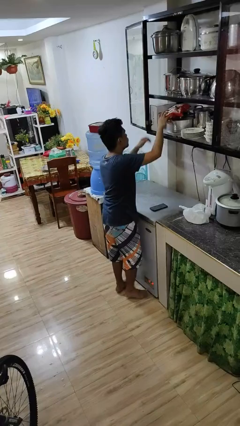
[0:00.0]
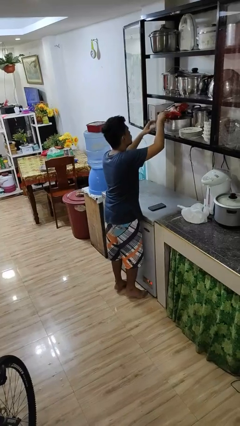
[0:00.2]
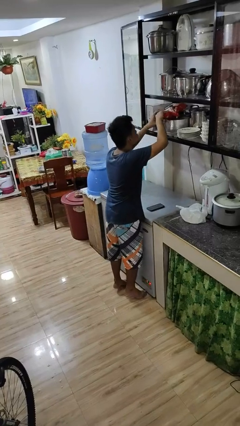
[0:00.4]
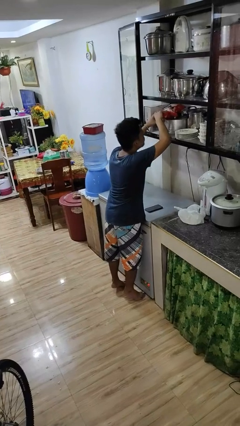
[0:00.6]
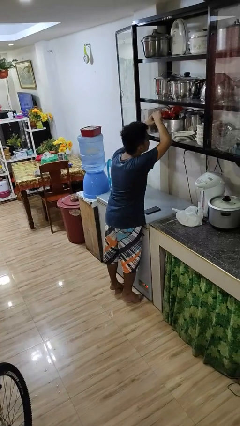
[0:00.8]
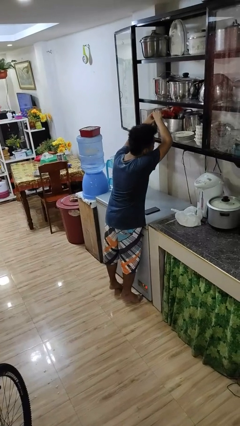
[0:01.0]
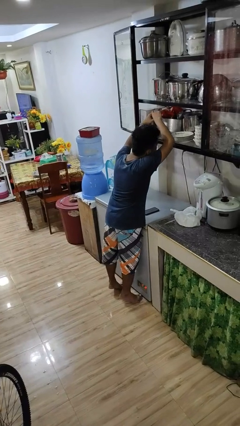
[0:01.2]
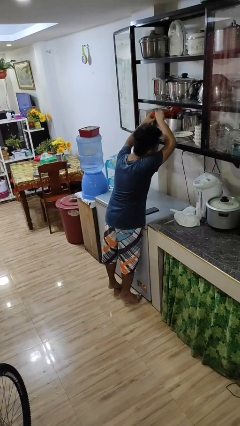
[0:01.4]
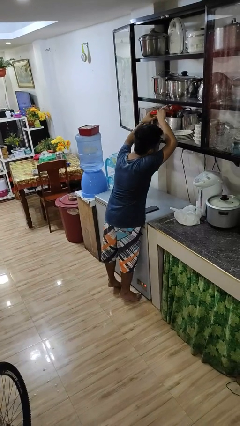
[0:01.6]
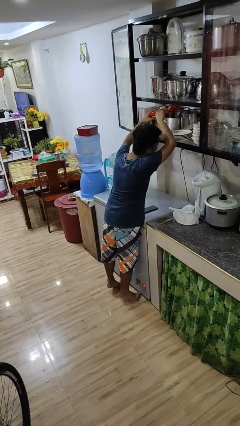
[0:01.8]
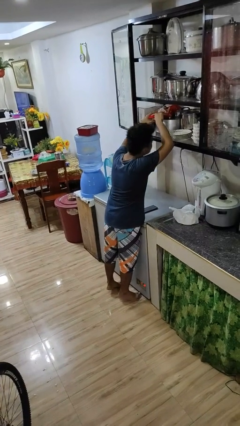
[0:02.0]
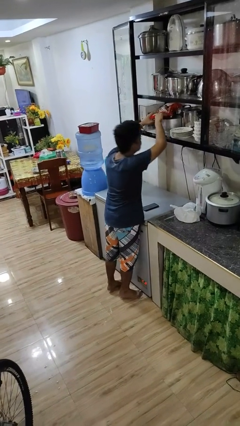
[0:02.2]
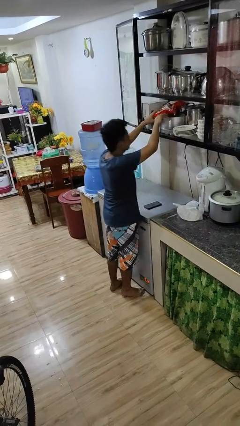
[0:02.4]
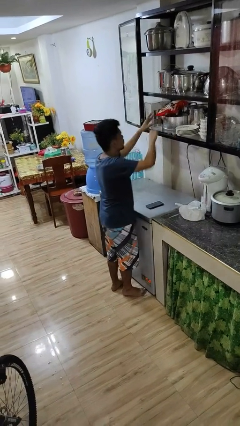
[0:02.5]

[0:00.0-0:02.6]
person searches in cabinet

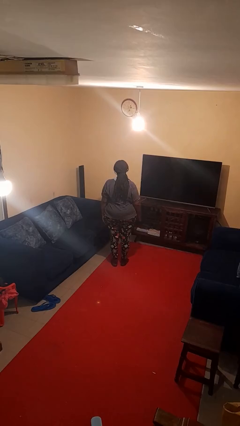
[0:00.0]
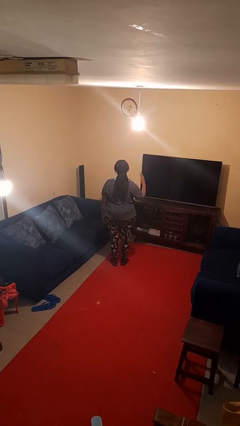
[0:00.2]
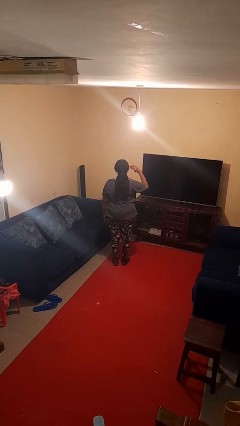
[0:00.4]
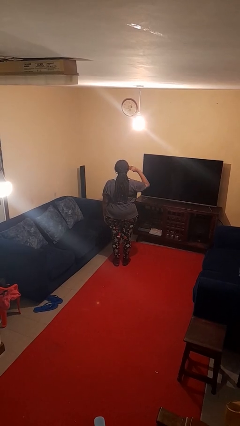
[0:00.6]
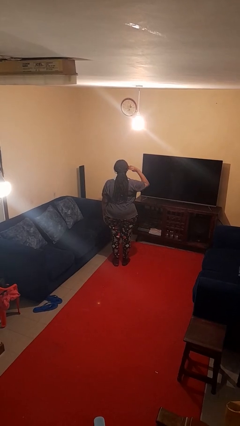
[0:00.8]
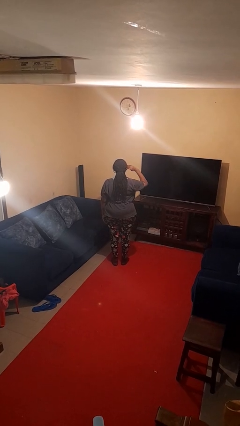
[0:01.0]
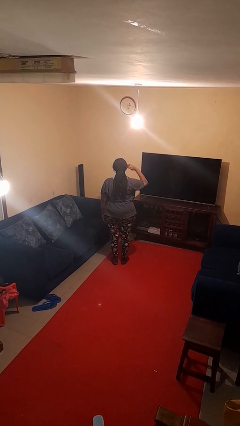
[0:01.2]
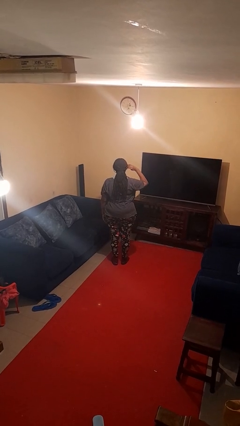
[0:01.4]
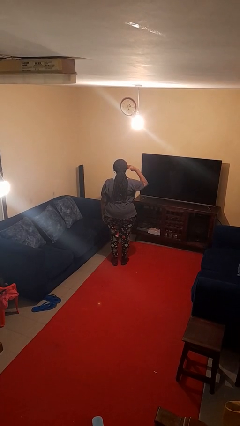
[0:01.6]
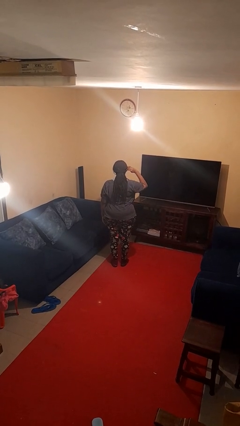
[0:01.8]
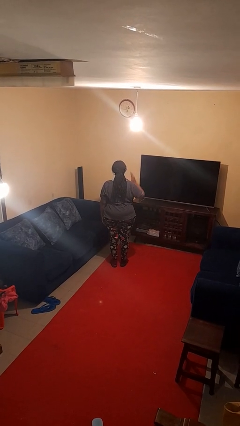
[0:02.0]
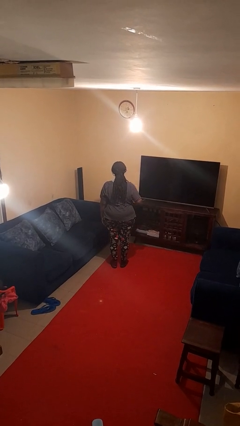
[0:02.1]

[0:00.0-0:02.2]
person salutes

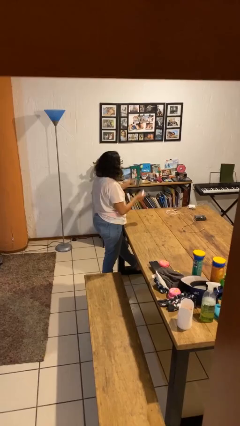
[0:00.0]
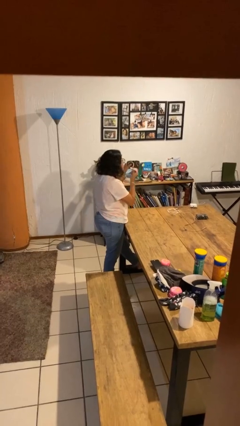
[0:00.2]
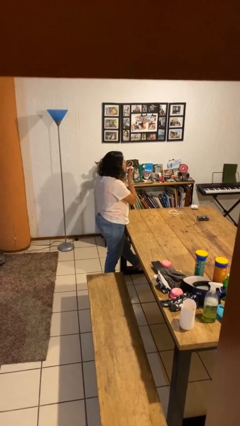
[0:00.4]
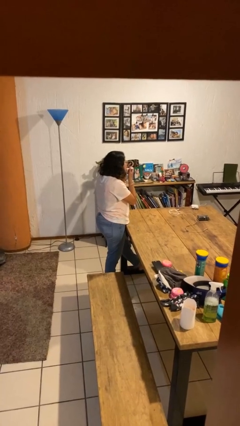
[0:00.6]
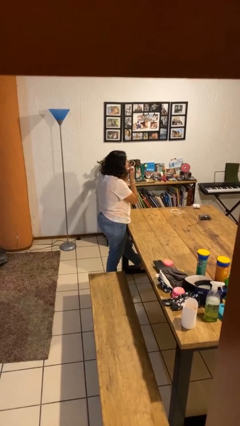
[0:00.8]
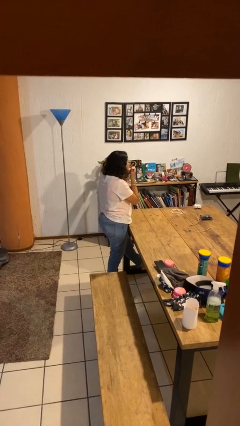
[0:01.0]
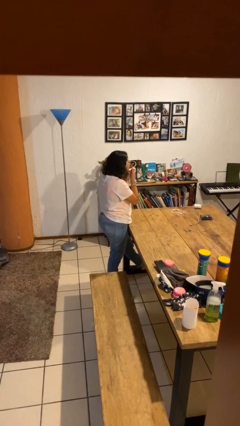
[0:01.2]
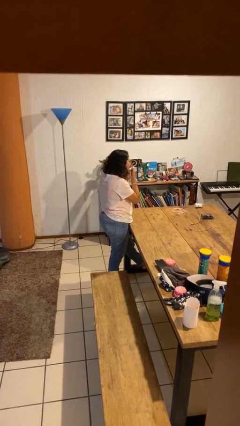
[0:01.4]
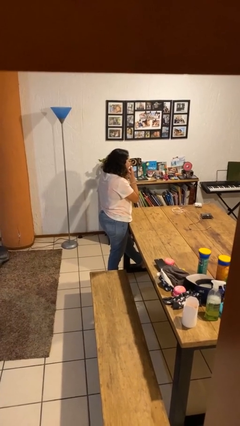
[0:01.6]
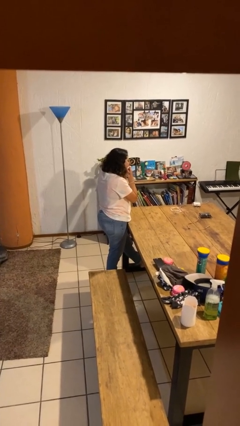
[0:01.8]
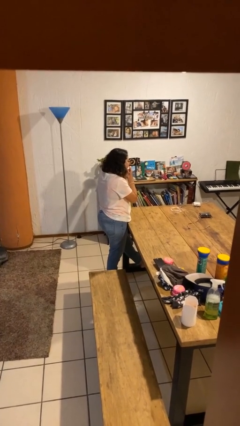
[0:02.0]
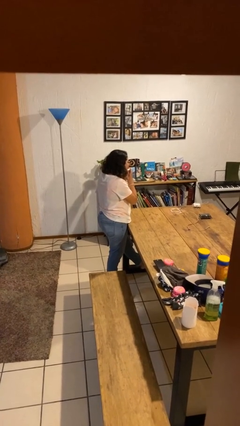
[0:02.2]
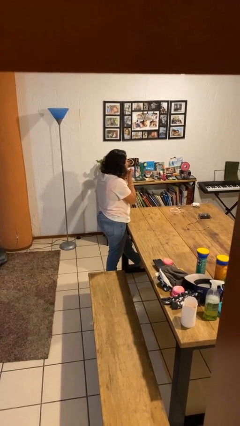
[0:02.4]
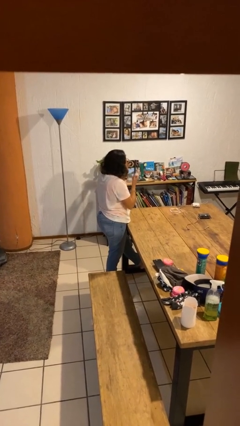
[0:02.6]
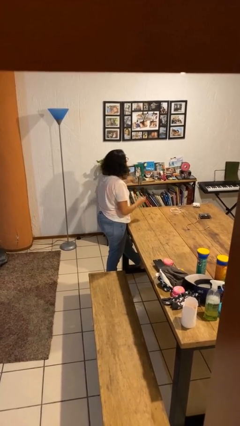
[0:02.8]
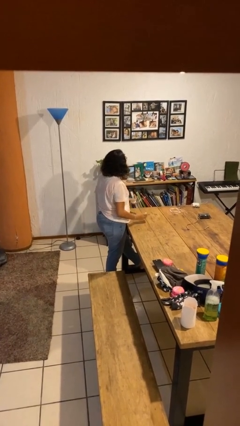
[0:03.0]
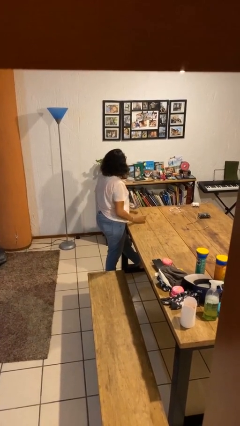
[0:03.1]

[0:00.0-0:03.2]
person applies lip makeup

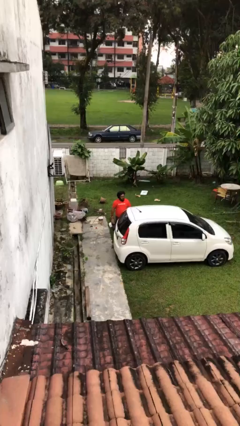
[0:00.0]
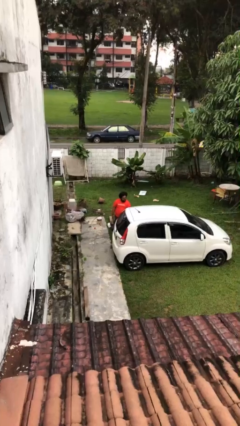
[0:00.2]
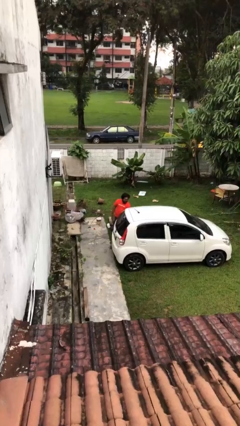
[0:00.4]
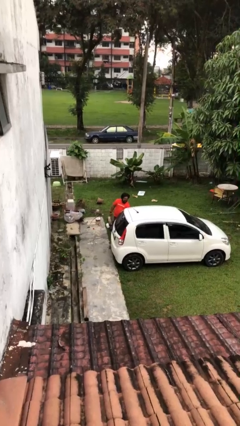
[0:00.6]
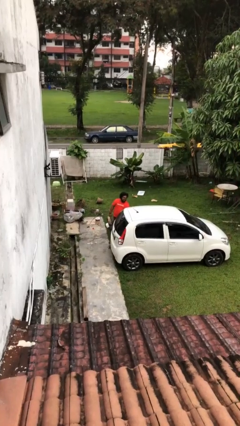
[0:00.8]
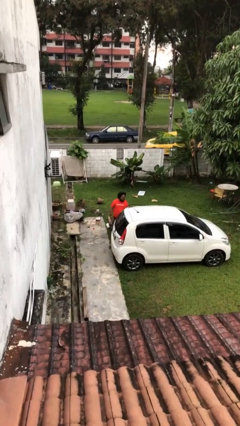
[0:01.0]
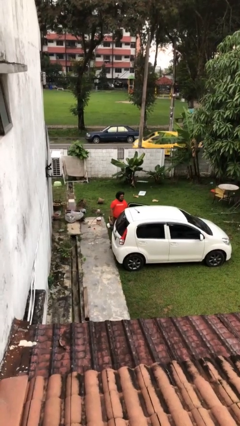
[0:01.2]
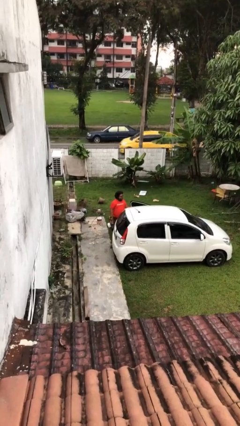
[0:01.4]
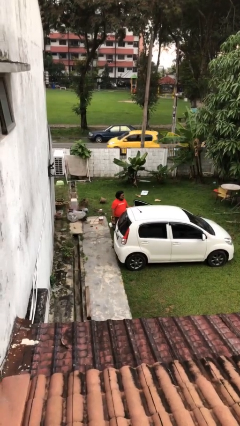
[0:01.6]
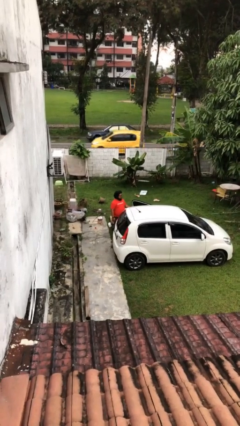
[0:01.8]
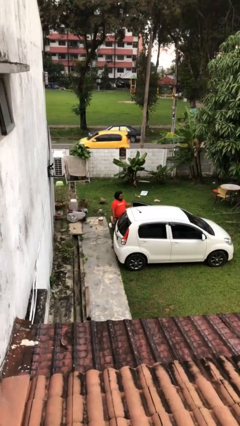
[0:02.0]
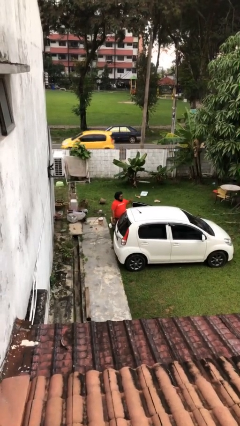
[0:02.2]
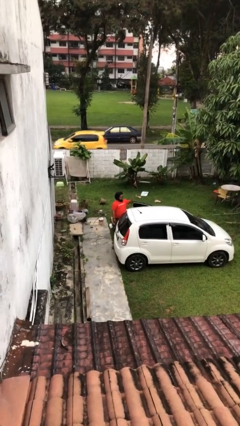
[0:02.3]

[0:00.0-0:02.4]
person opens car door

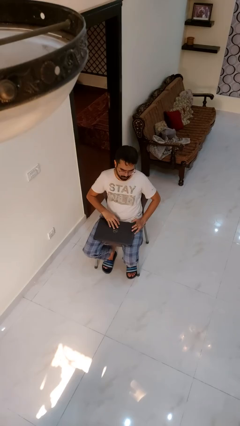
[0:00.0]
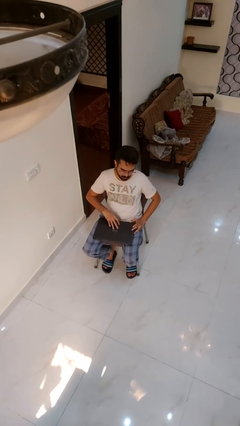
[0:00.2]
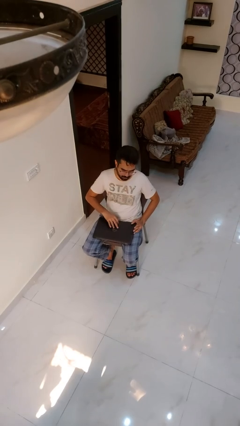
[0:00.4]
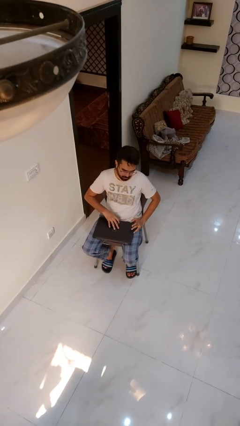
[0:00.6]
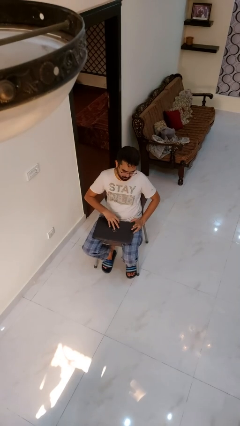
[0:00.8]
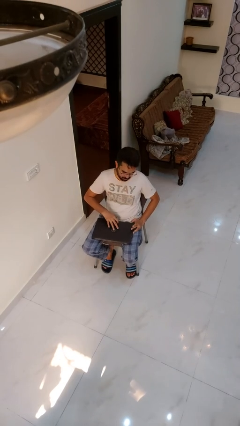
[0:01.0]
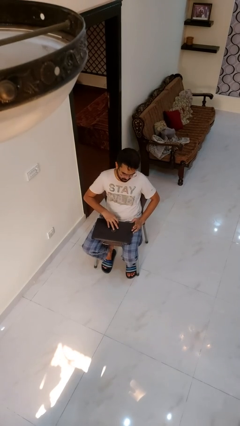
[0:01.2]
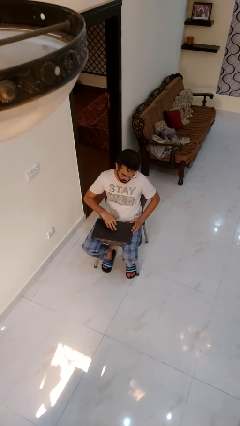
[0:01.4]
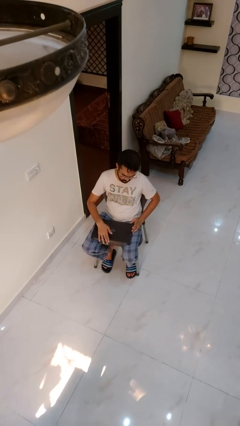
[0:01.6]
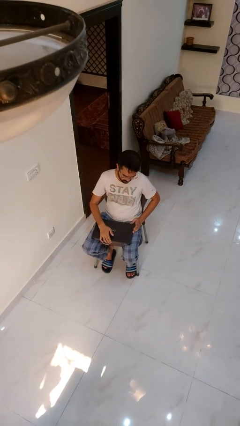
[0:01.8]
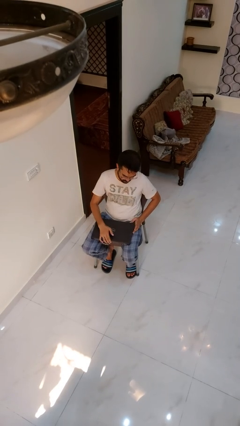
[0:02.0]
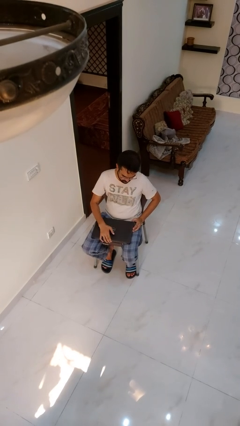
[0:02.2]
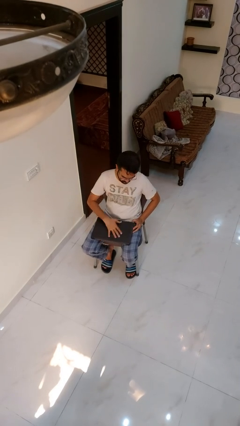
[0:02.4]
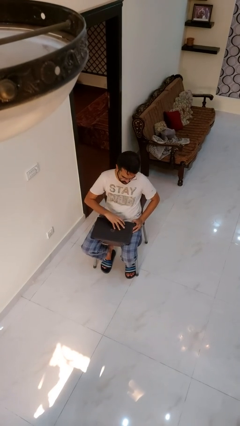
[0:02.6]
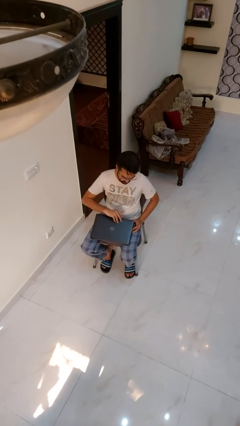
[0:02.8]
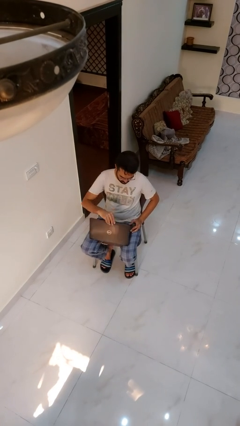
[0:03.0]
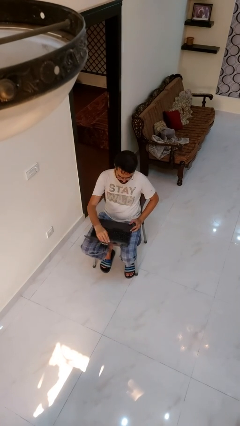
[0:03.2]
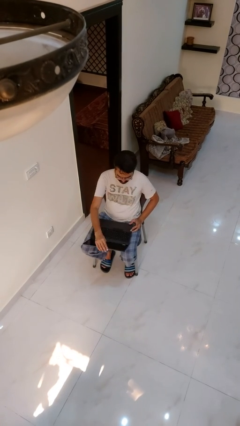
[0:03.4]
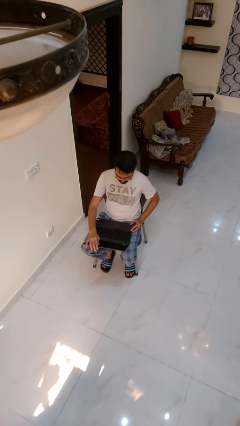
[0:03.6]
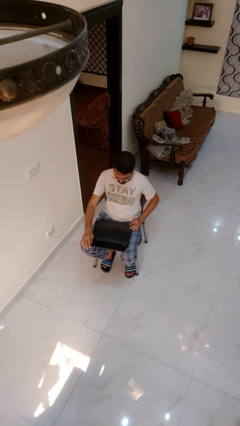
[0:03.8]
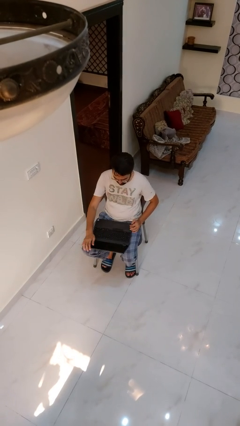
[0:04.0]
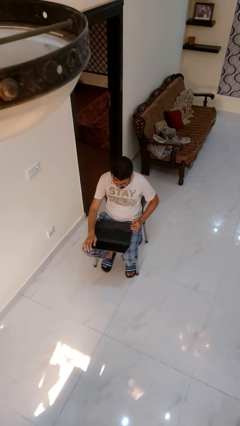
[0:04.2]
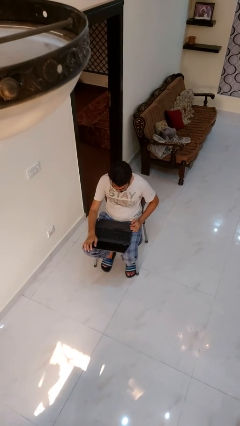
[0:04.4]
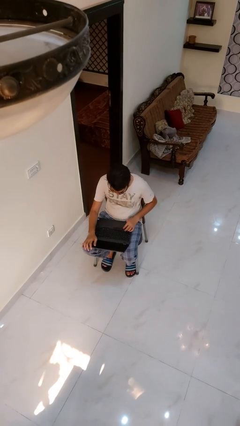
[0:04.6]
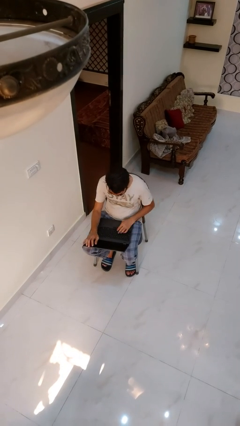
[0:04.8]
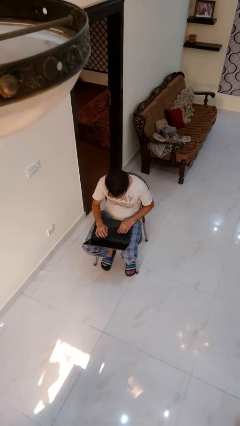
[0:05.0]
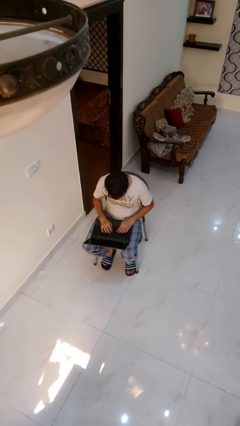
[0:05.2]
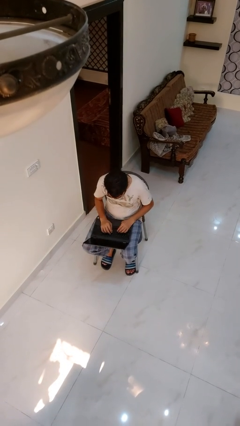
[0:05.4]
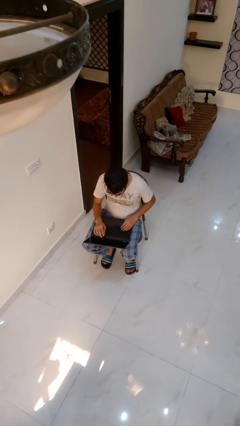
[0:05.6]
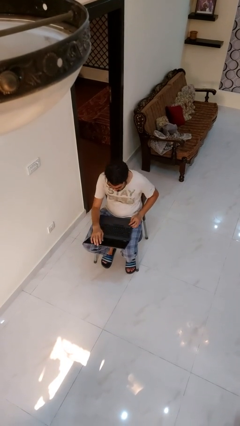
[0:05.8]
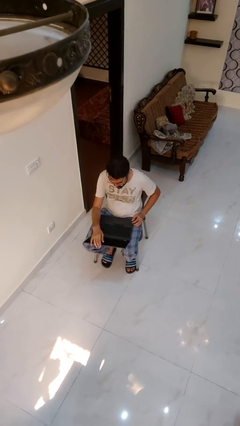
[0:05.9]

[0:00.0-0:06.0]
person opens laptop

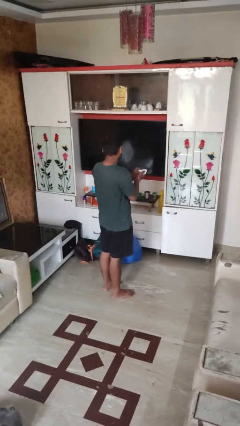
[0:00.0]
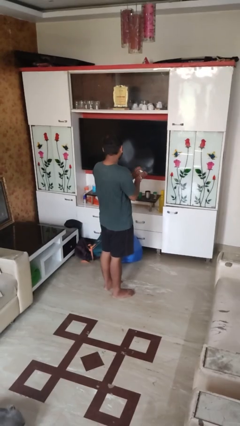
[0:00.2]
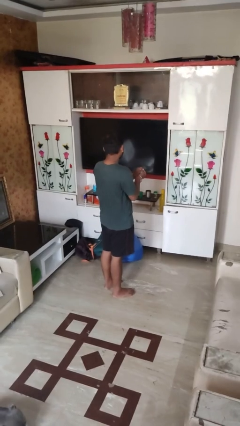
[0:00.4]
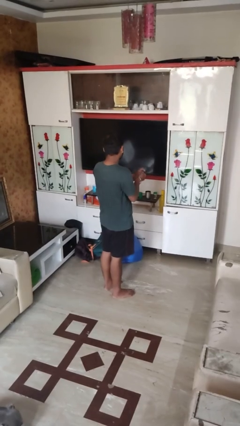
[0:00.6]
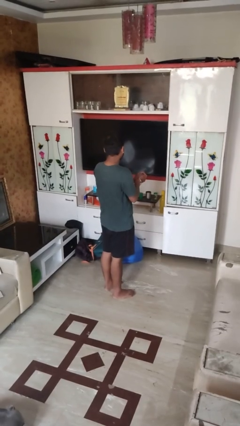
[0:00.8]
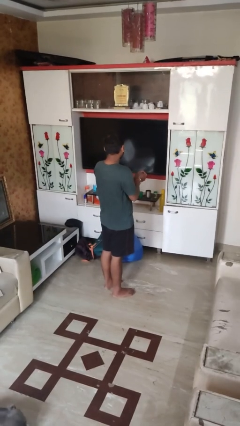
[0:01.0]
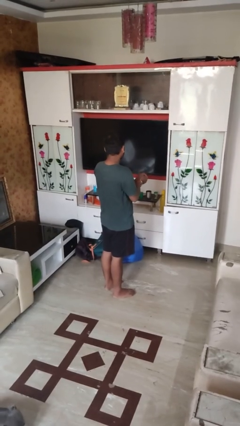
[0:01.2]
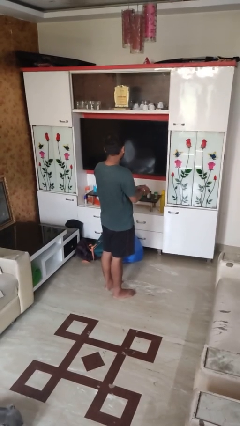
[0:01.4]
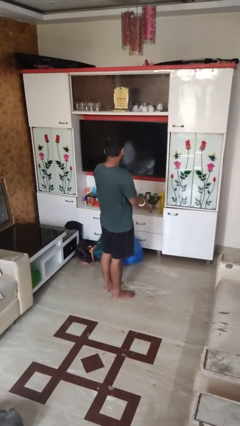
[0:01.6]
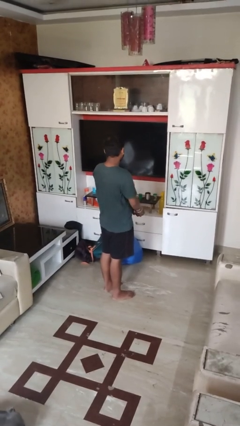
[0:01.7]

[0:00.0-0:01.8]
person crumples paper
